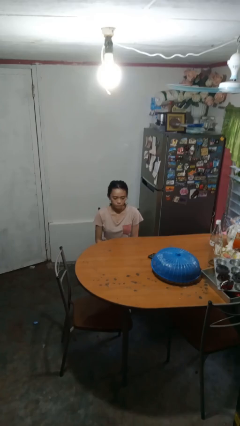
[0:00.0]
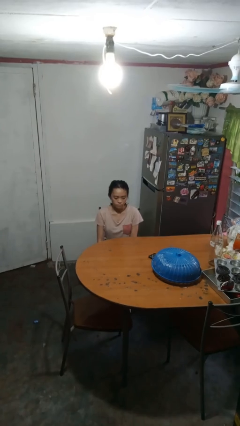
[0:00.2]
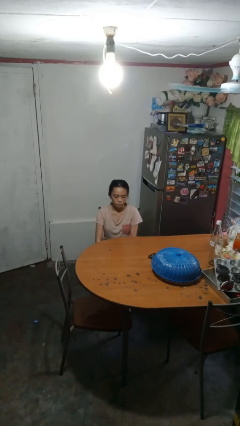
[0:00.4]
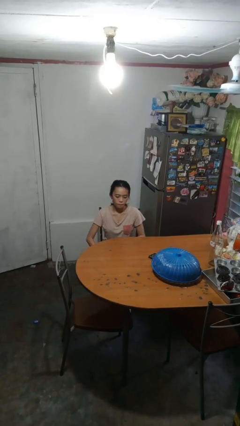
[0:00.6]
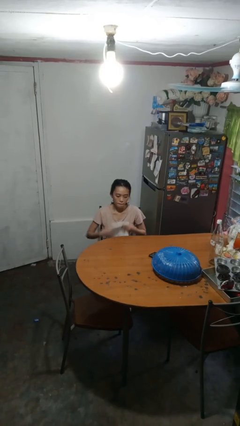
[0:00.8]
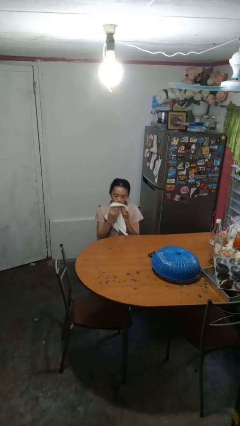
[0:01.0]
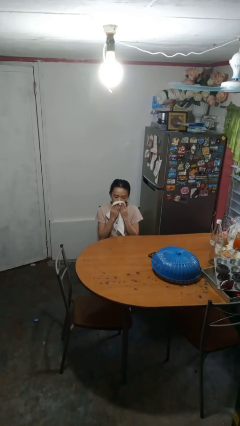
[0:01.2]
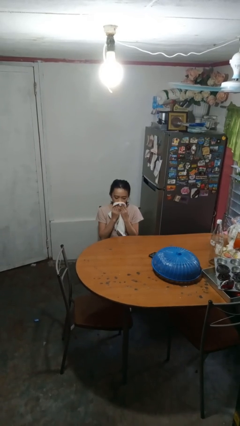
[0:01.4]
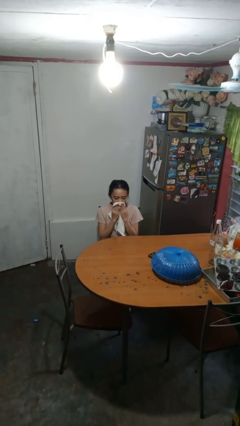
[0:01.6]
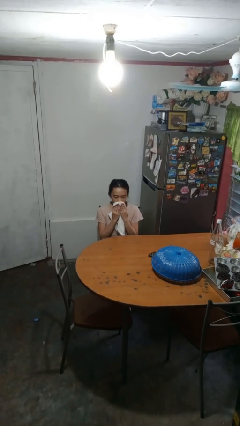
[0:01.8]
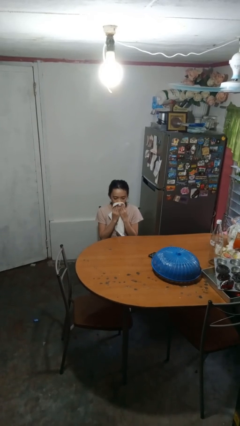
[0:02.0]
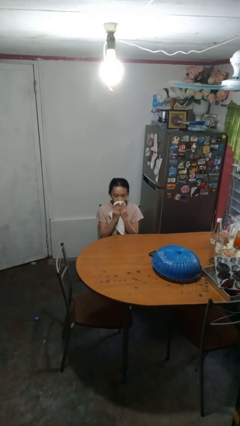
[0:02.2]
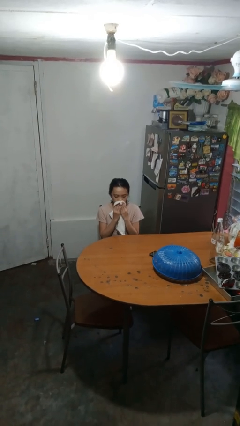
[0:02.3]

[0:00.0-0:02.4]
person wipes mouth with napkin

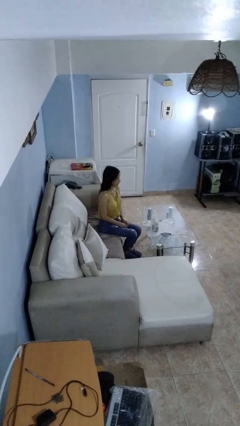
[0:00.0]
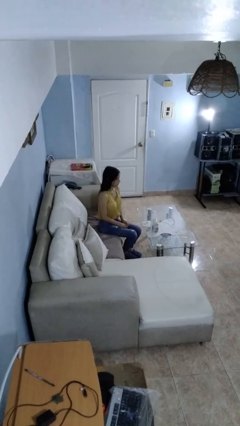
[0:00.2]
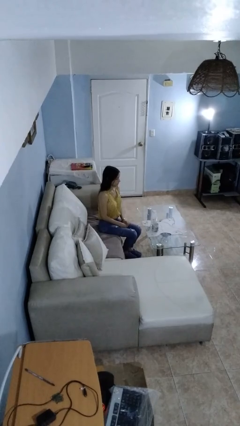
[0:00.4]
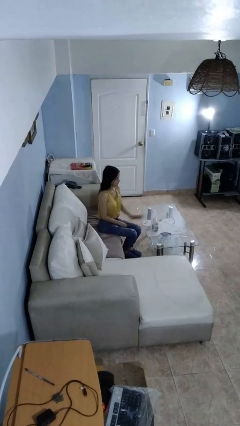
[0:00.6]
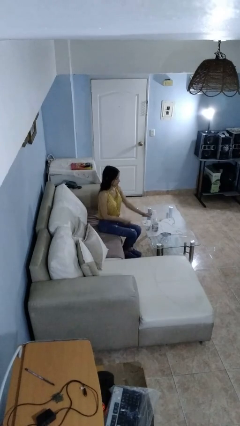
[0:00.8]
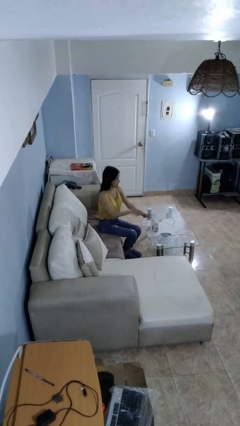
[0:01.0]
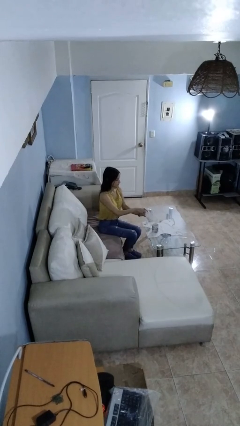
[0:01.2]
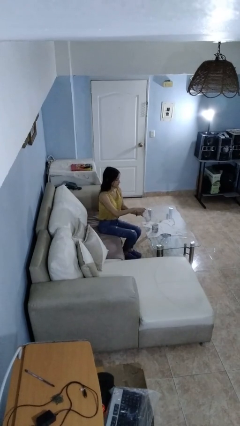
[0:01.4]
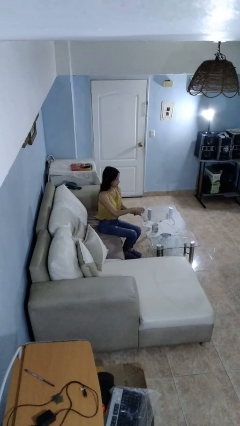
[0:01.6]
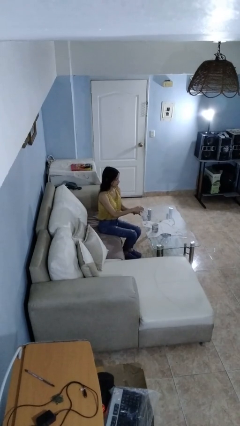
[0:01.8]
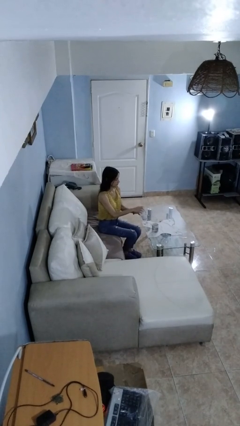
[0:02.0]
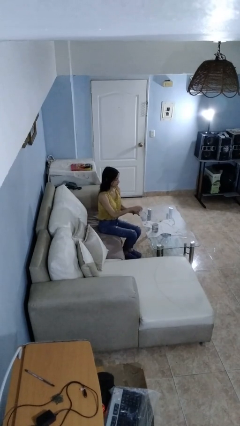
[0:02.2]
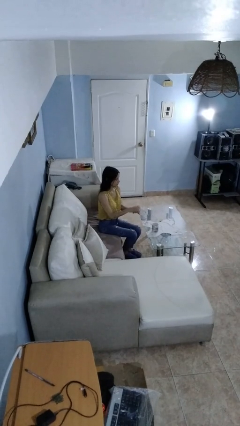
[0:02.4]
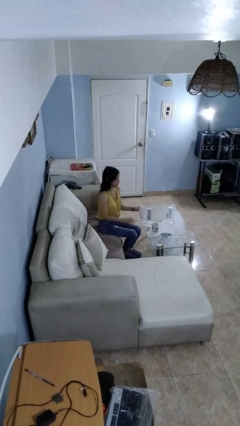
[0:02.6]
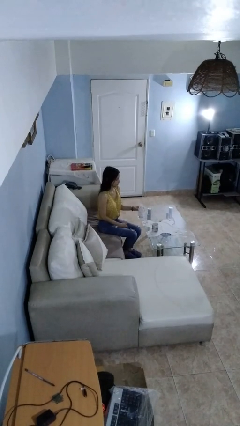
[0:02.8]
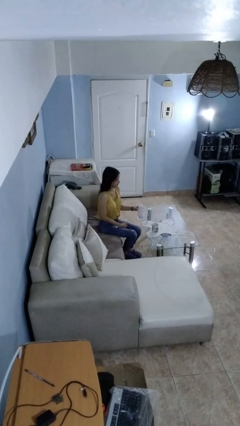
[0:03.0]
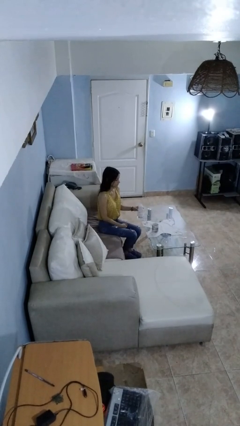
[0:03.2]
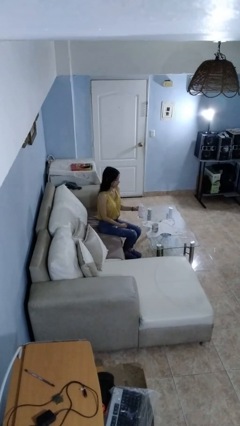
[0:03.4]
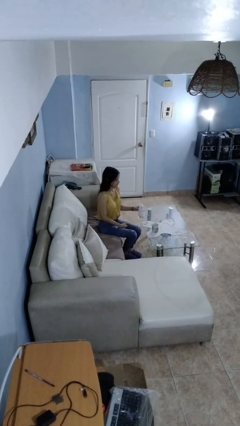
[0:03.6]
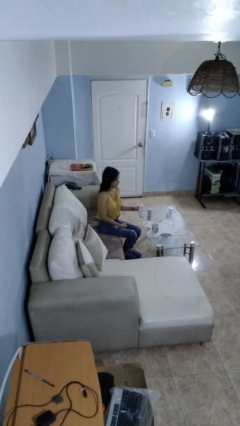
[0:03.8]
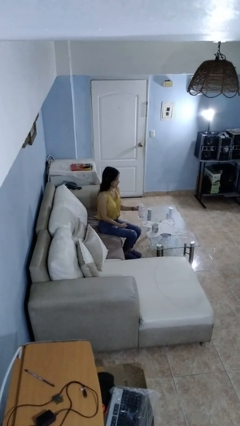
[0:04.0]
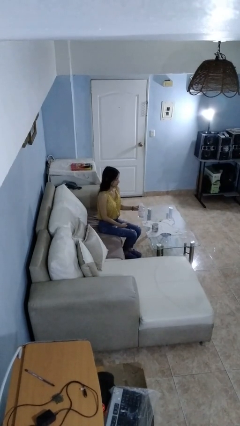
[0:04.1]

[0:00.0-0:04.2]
person unscrews lid from bottle

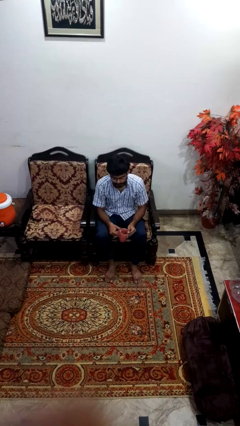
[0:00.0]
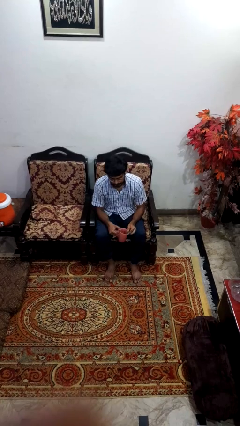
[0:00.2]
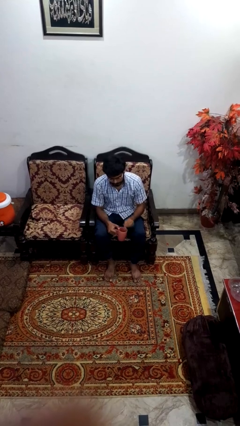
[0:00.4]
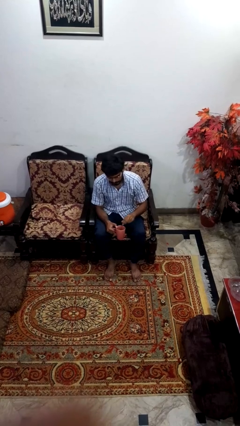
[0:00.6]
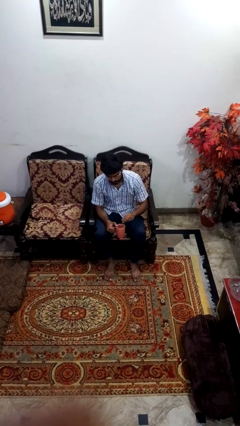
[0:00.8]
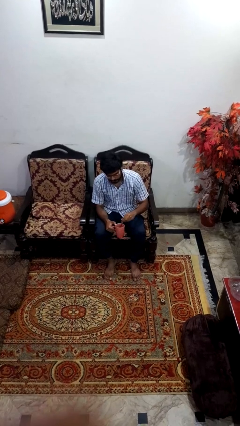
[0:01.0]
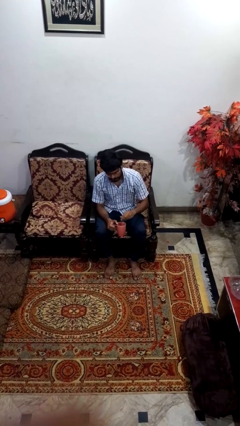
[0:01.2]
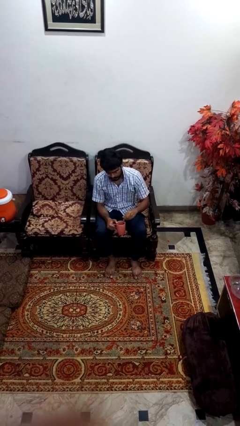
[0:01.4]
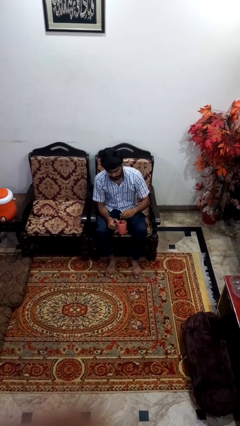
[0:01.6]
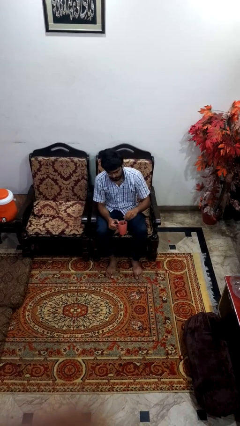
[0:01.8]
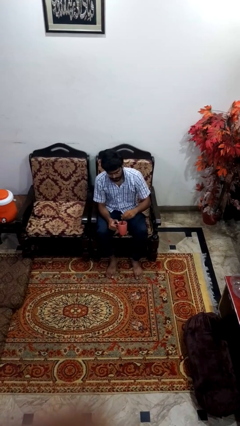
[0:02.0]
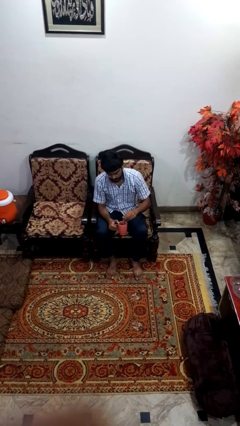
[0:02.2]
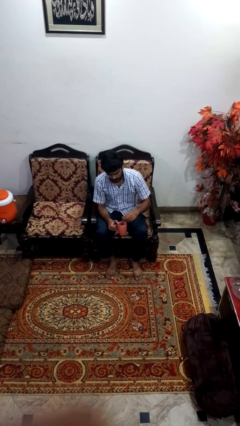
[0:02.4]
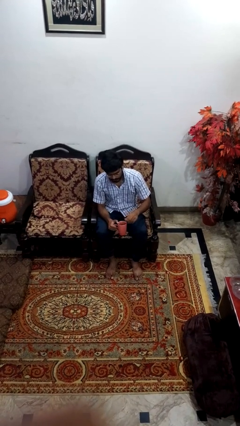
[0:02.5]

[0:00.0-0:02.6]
person stirs mug

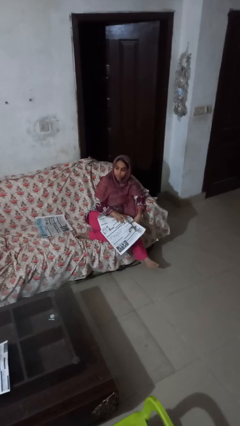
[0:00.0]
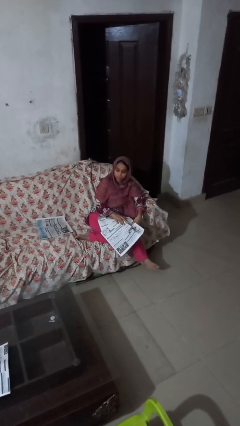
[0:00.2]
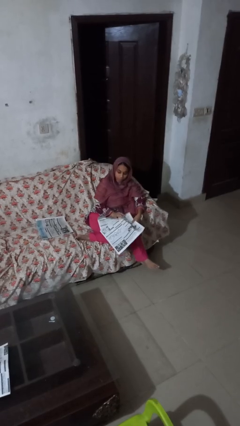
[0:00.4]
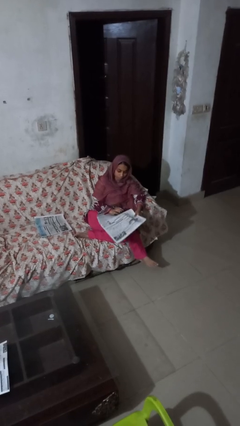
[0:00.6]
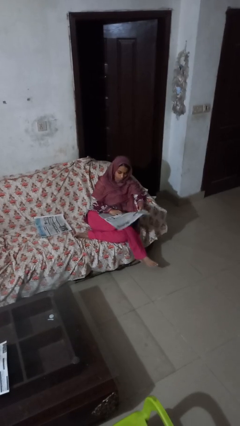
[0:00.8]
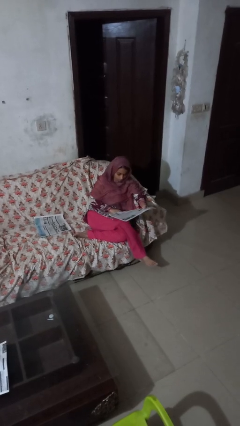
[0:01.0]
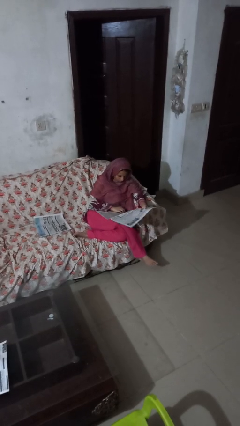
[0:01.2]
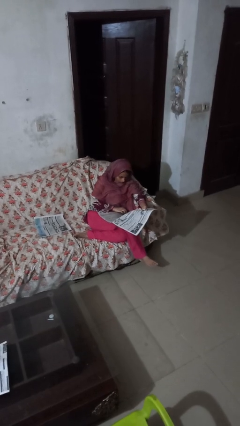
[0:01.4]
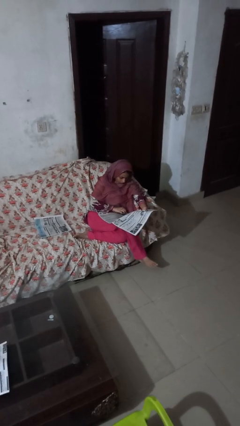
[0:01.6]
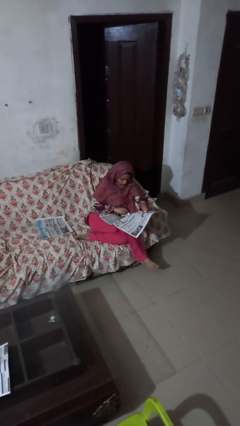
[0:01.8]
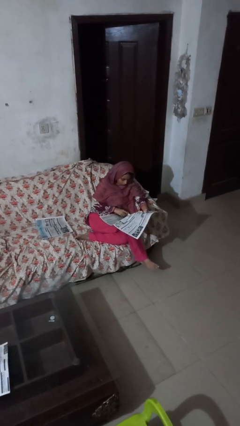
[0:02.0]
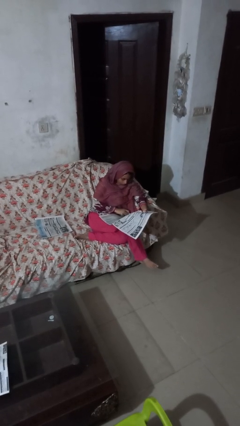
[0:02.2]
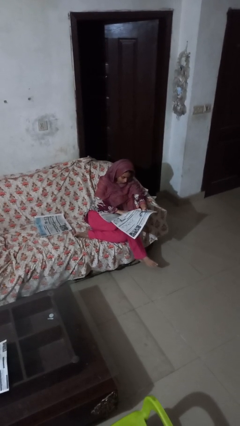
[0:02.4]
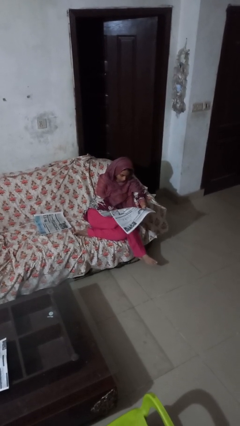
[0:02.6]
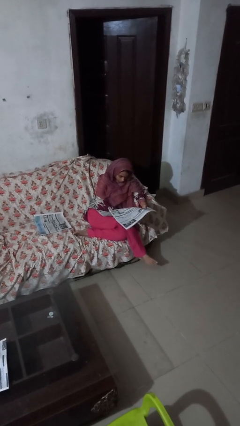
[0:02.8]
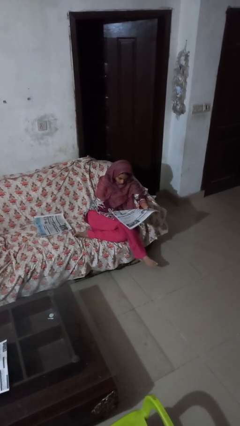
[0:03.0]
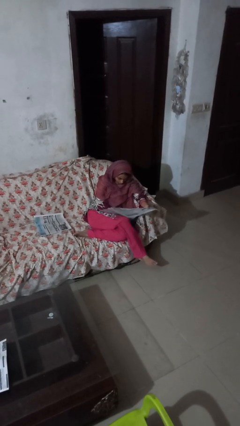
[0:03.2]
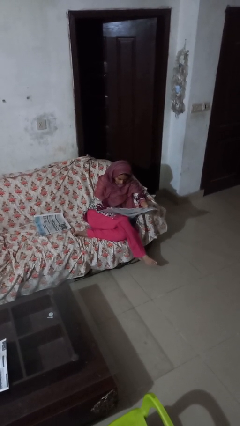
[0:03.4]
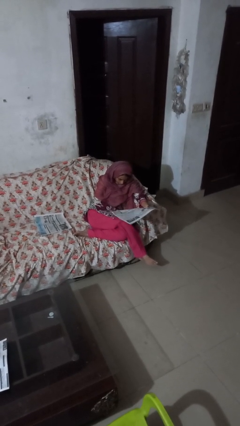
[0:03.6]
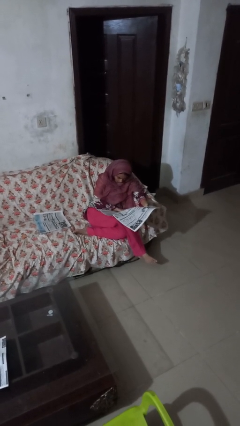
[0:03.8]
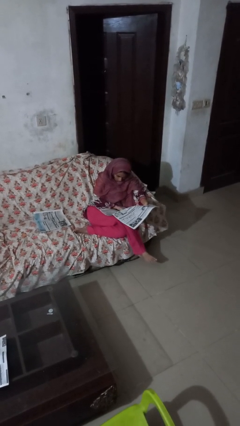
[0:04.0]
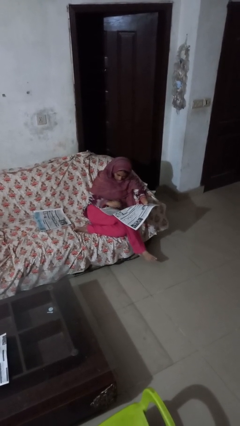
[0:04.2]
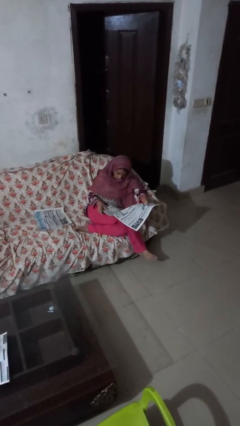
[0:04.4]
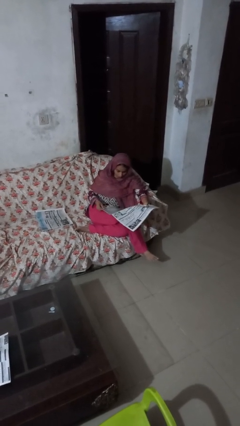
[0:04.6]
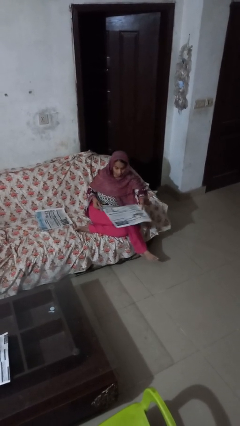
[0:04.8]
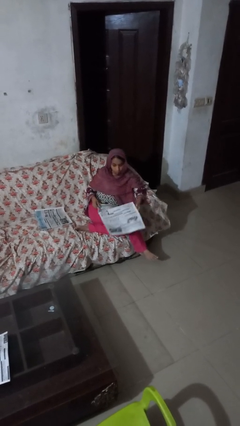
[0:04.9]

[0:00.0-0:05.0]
person reads newspaper

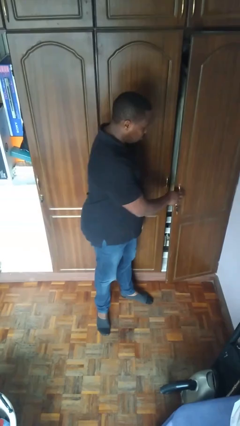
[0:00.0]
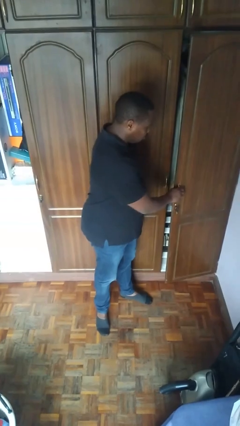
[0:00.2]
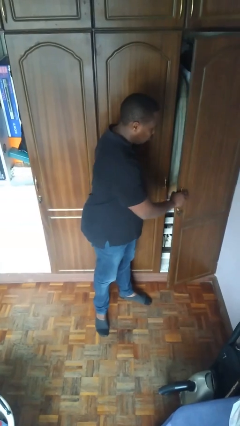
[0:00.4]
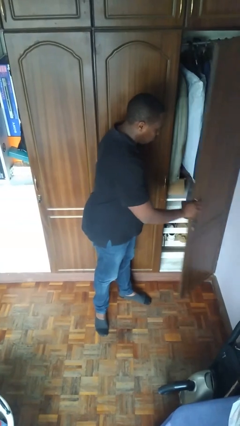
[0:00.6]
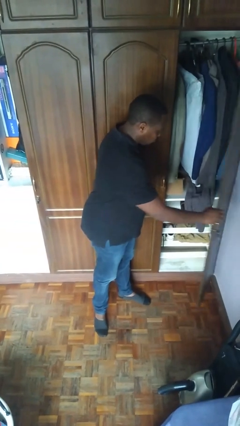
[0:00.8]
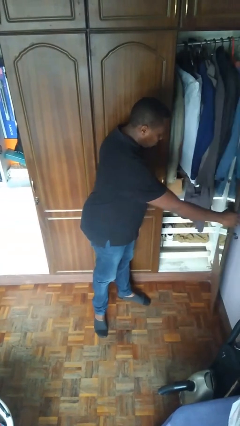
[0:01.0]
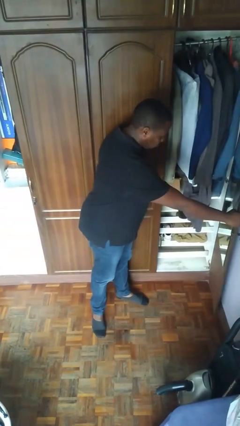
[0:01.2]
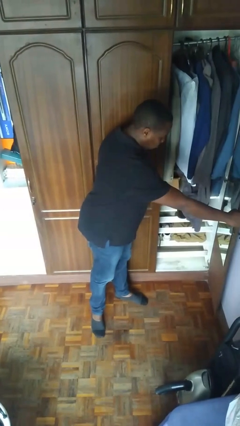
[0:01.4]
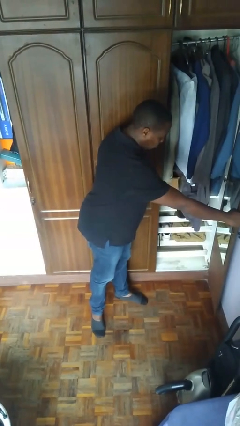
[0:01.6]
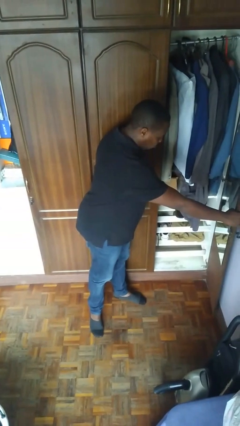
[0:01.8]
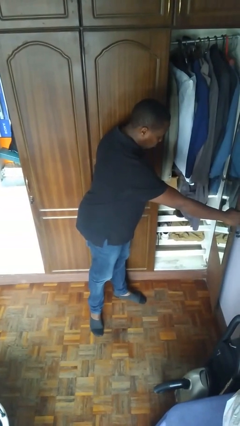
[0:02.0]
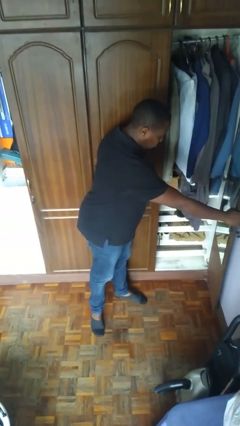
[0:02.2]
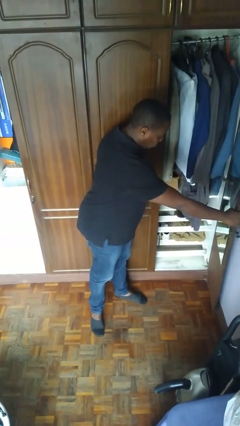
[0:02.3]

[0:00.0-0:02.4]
person opens closet door

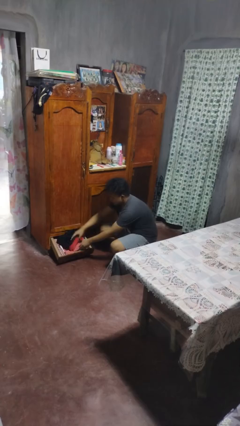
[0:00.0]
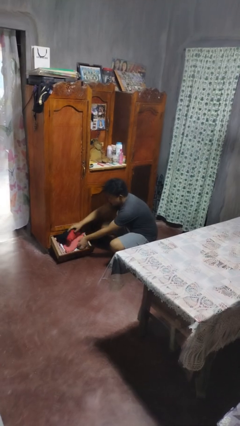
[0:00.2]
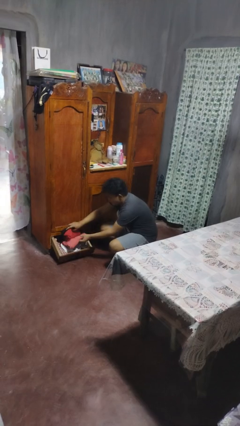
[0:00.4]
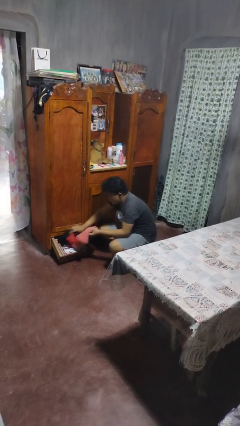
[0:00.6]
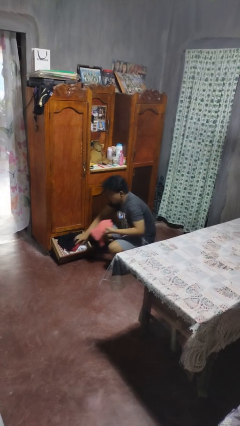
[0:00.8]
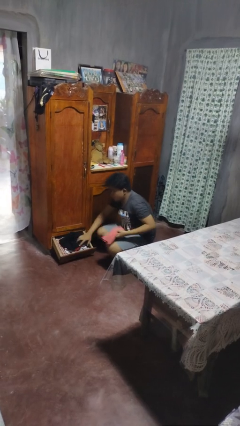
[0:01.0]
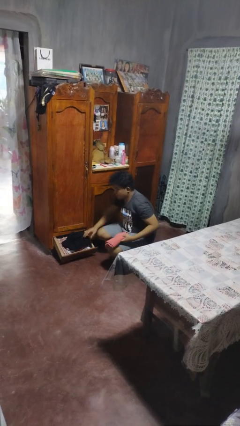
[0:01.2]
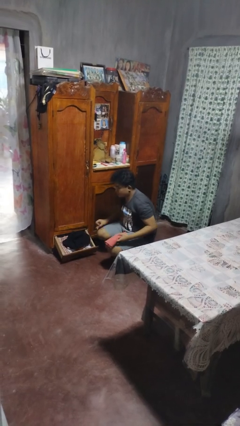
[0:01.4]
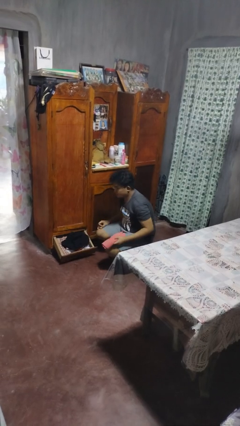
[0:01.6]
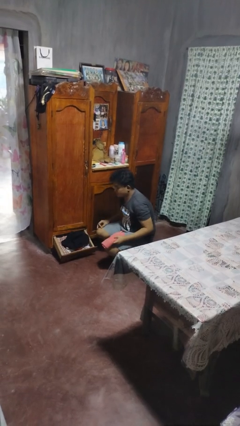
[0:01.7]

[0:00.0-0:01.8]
person takes clothes from dresser
